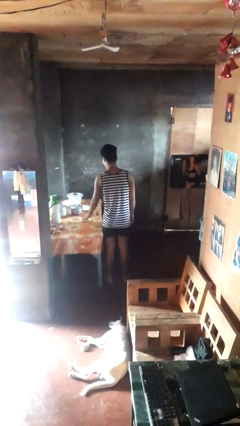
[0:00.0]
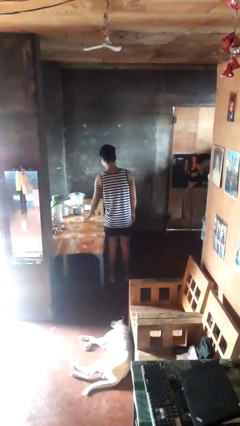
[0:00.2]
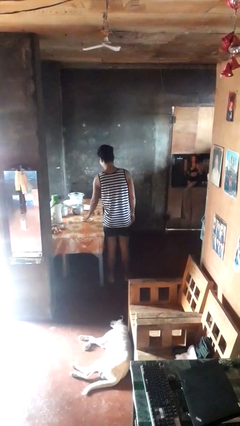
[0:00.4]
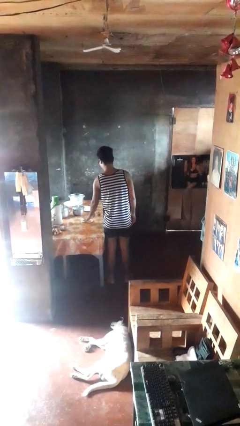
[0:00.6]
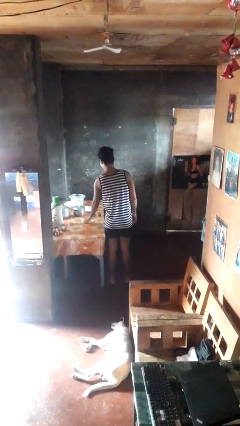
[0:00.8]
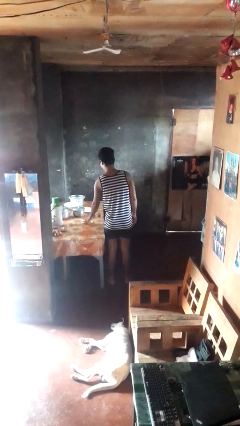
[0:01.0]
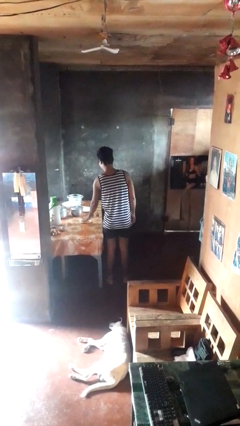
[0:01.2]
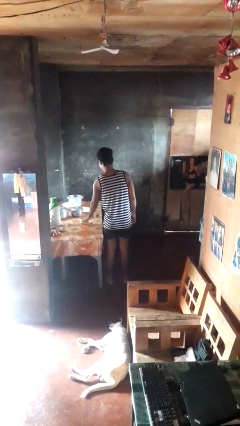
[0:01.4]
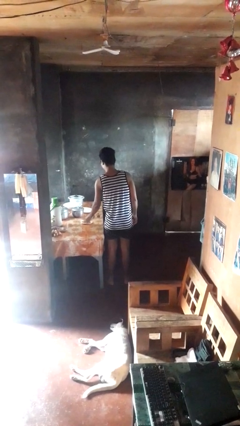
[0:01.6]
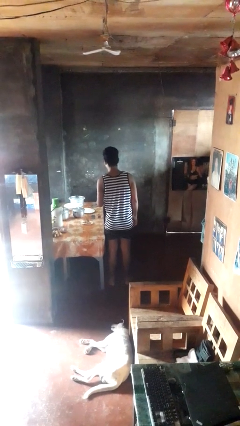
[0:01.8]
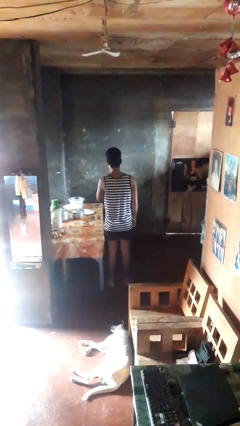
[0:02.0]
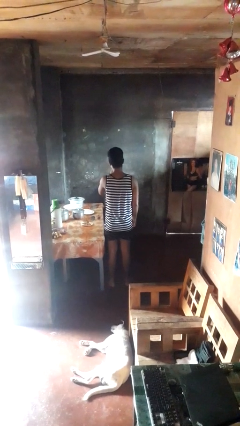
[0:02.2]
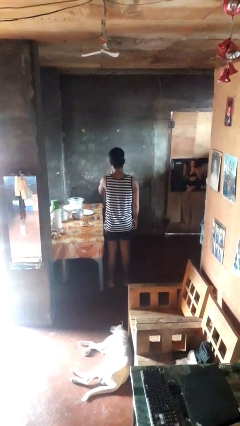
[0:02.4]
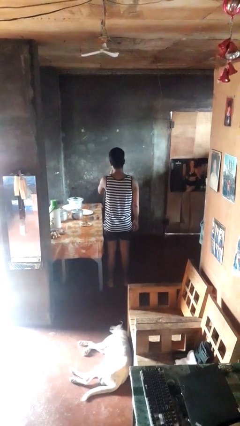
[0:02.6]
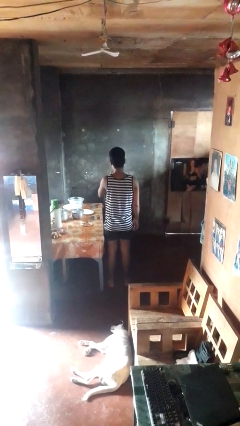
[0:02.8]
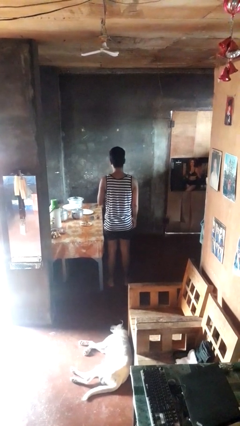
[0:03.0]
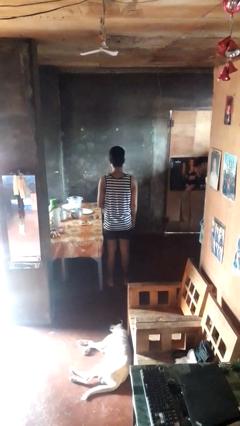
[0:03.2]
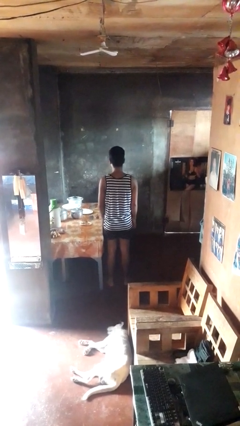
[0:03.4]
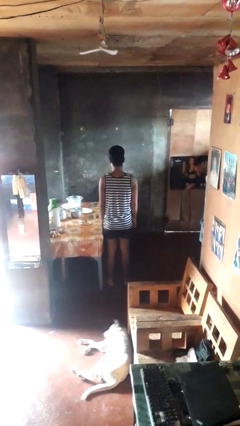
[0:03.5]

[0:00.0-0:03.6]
person eats with hands

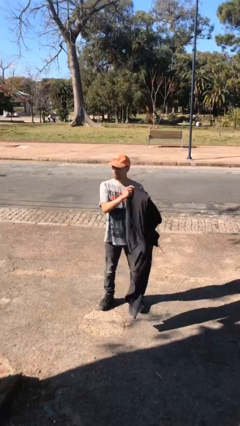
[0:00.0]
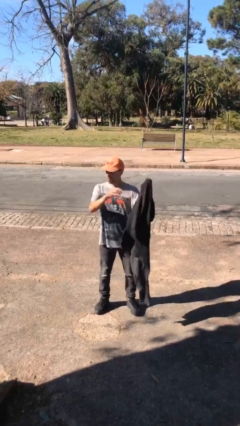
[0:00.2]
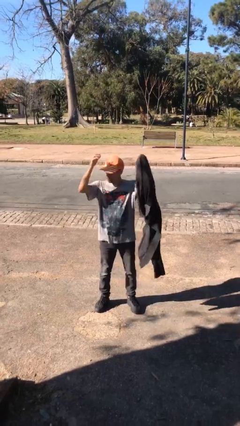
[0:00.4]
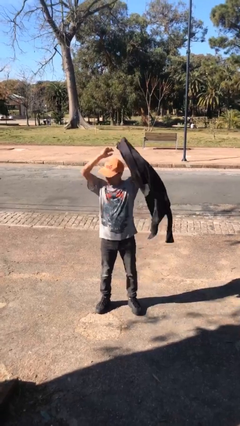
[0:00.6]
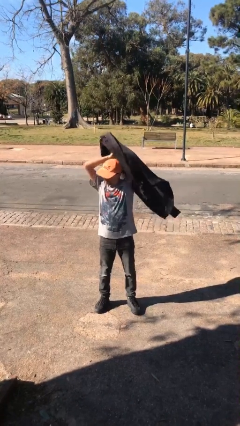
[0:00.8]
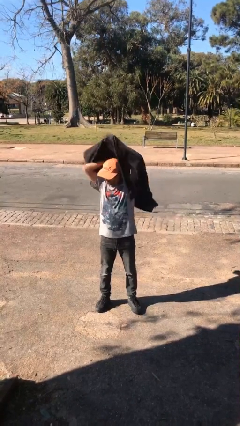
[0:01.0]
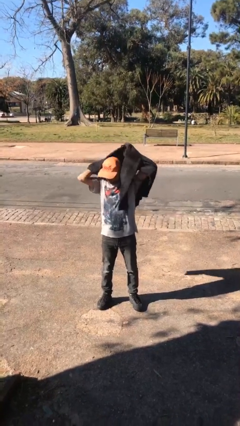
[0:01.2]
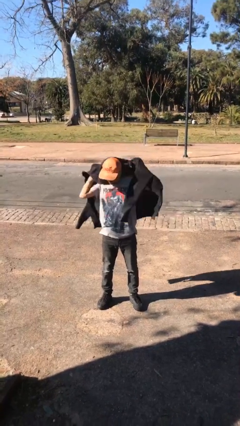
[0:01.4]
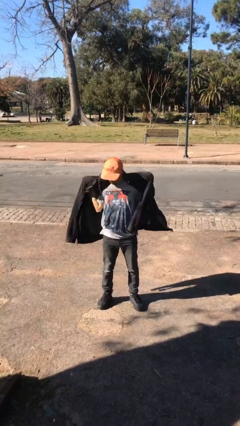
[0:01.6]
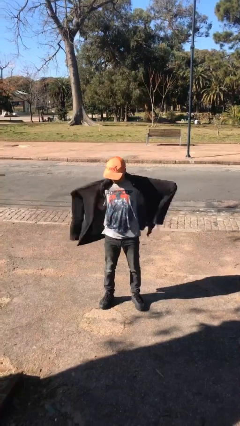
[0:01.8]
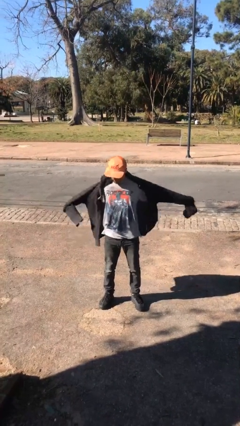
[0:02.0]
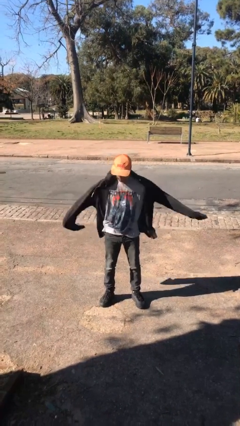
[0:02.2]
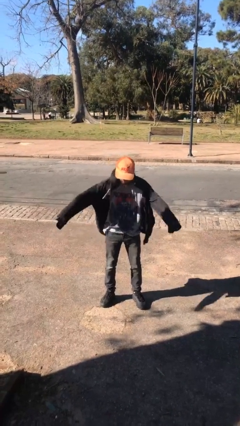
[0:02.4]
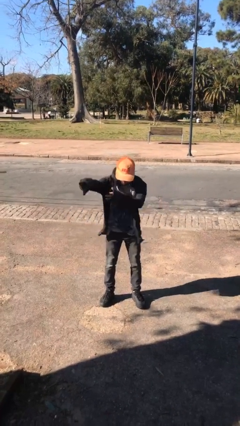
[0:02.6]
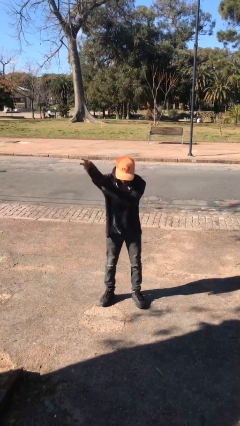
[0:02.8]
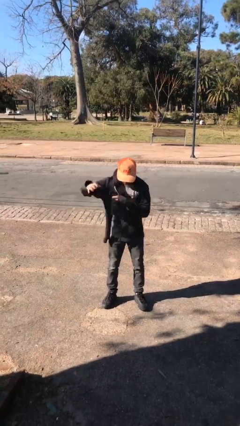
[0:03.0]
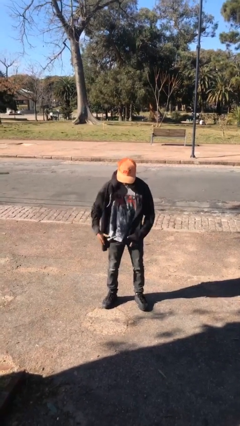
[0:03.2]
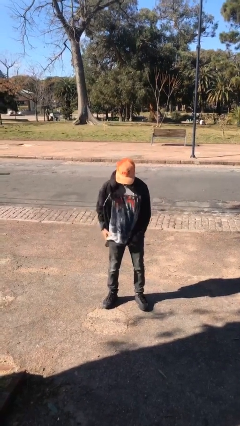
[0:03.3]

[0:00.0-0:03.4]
person puts on jacket

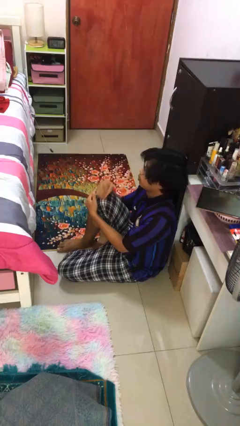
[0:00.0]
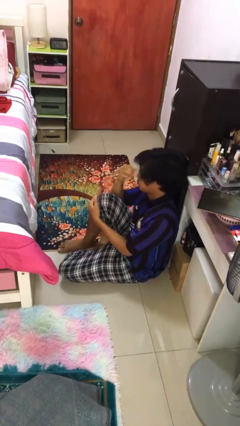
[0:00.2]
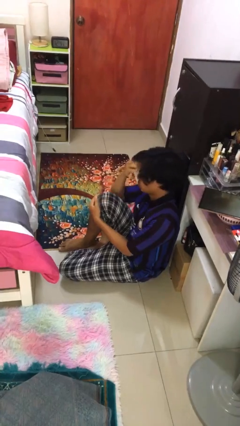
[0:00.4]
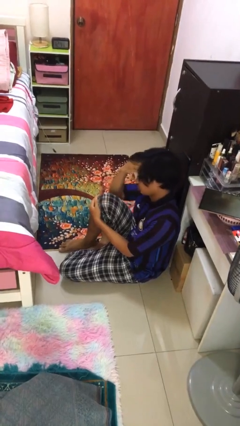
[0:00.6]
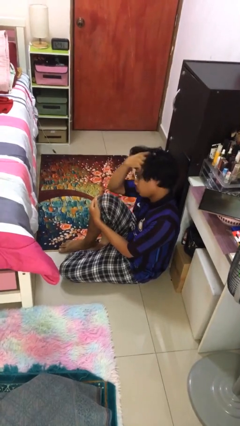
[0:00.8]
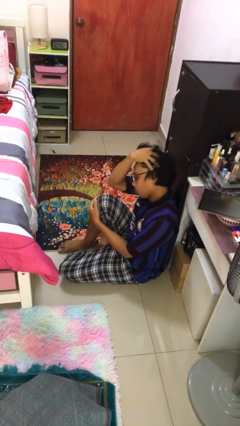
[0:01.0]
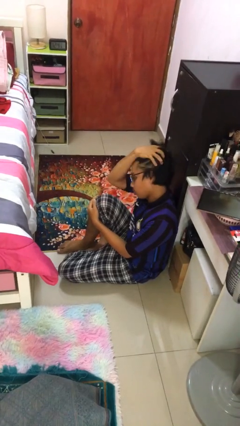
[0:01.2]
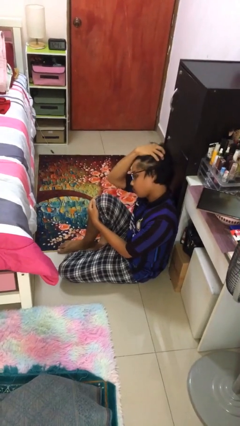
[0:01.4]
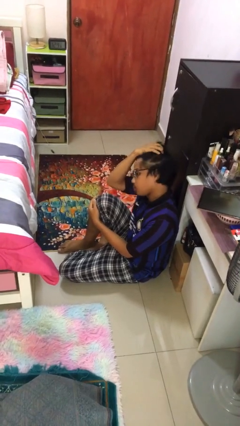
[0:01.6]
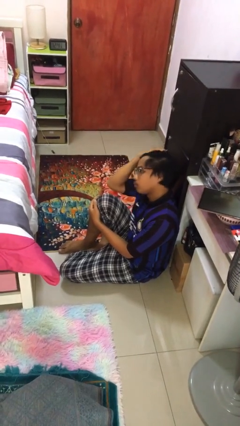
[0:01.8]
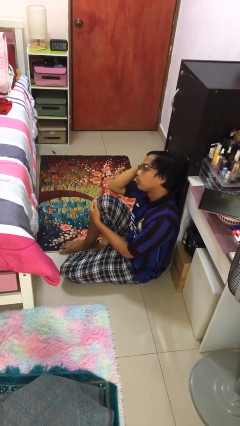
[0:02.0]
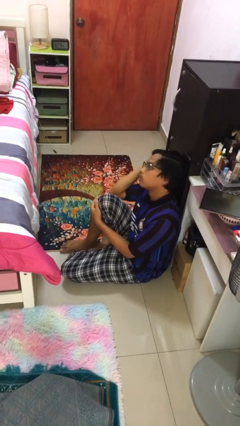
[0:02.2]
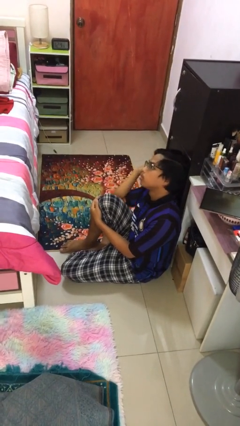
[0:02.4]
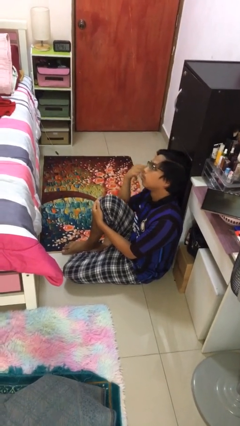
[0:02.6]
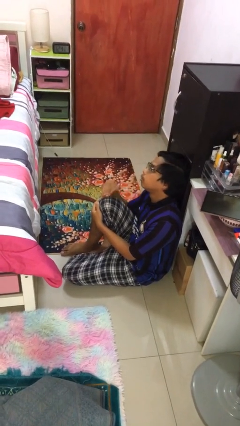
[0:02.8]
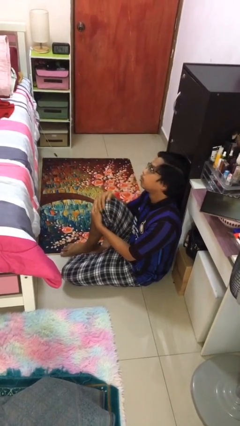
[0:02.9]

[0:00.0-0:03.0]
person strokes hair

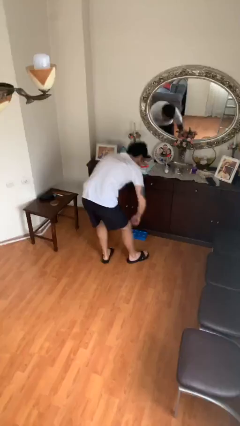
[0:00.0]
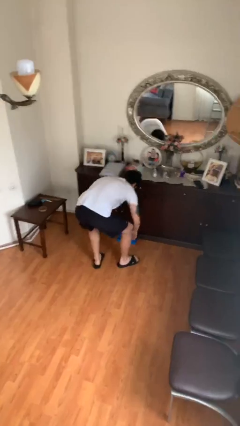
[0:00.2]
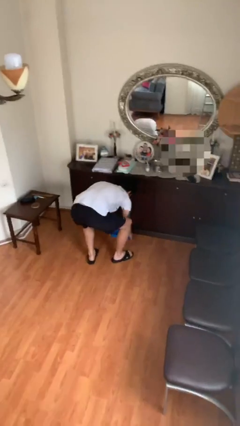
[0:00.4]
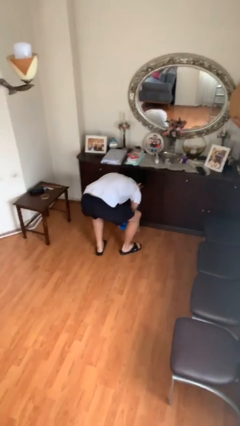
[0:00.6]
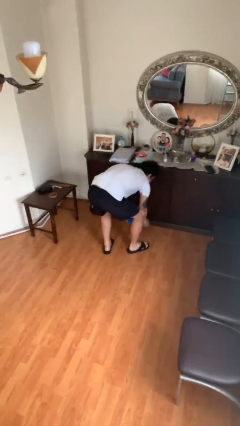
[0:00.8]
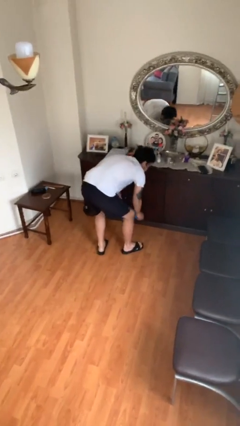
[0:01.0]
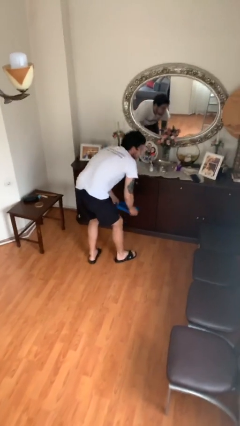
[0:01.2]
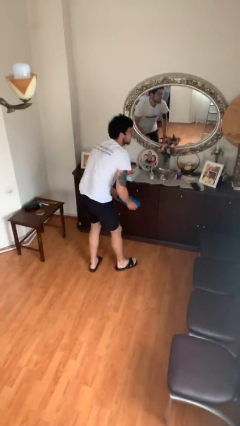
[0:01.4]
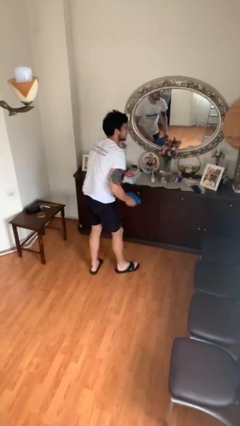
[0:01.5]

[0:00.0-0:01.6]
person picks up object from floor

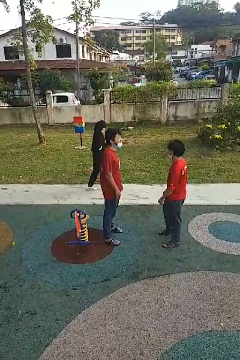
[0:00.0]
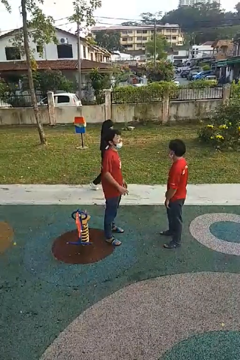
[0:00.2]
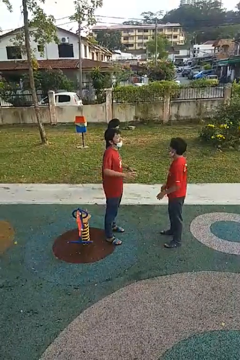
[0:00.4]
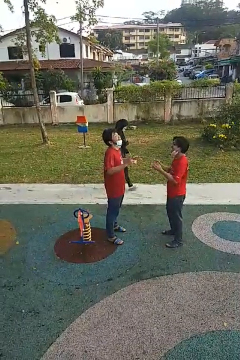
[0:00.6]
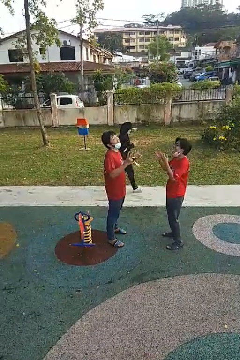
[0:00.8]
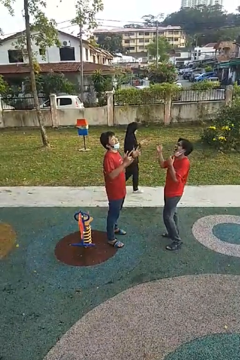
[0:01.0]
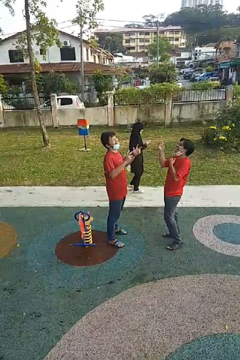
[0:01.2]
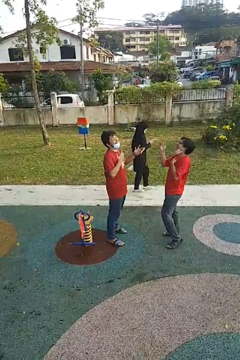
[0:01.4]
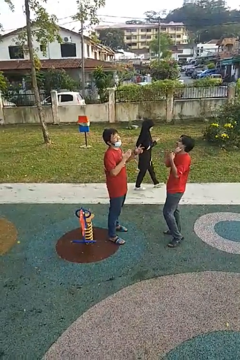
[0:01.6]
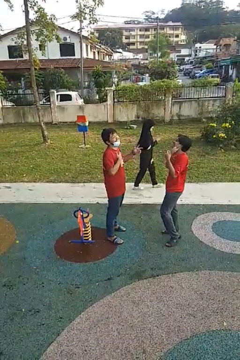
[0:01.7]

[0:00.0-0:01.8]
person laughs with person

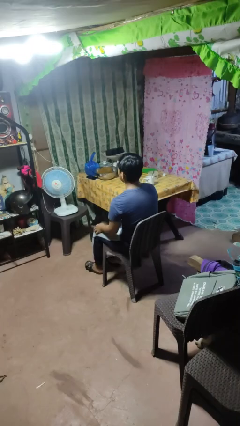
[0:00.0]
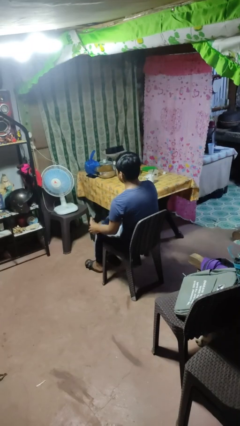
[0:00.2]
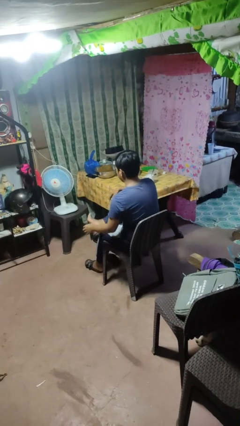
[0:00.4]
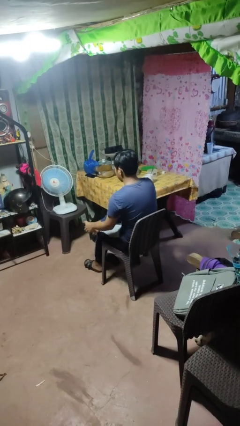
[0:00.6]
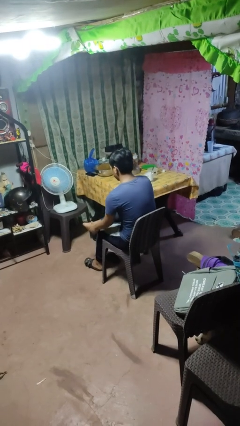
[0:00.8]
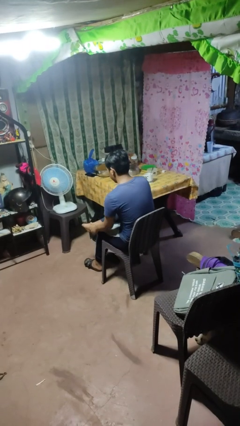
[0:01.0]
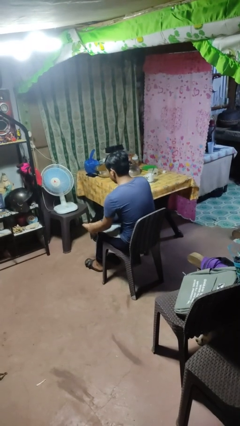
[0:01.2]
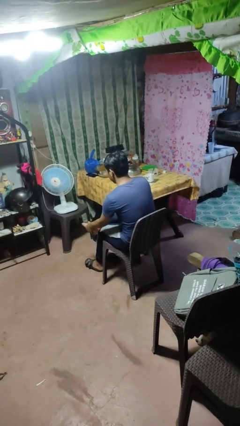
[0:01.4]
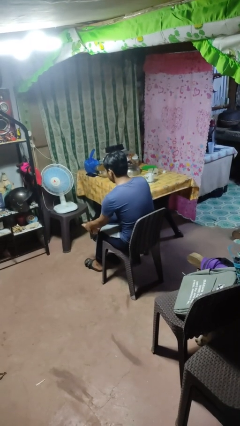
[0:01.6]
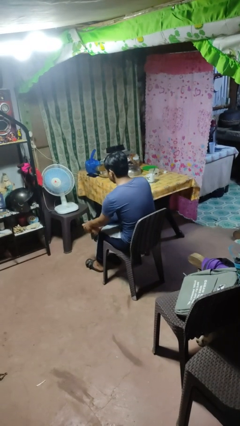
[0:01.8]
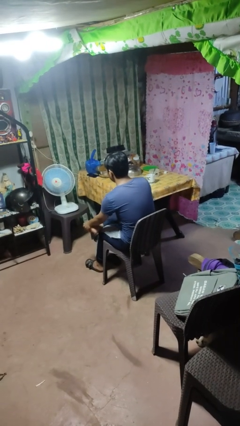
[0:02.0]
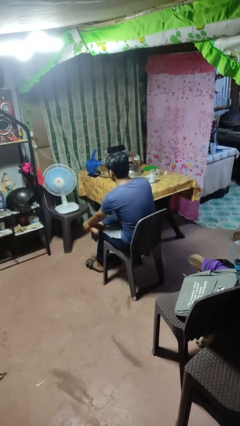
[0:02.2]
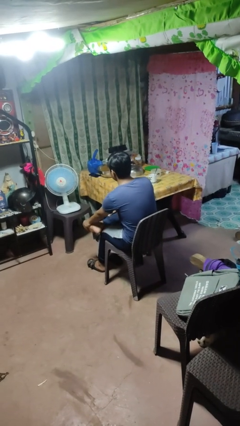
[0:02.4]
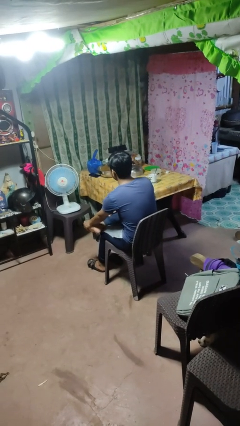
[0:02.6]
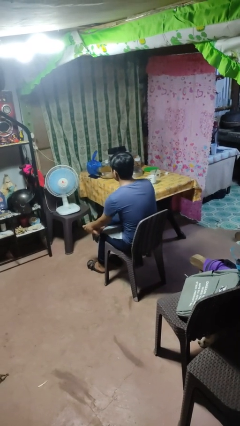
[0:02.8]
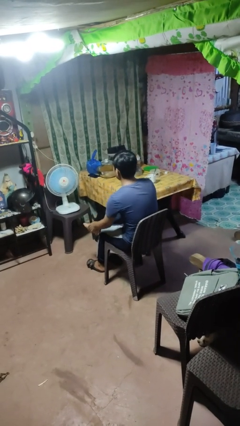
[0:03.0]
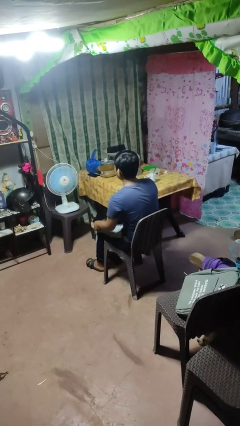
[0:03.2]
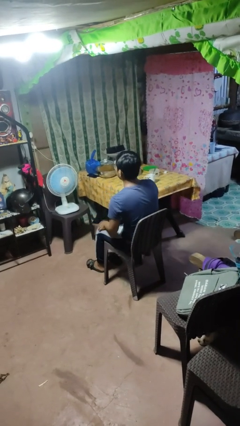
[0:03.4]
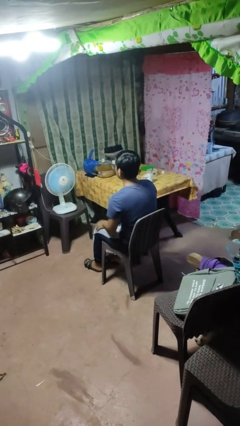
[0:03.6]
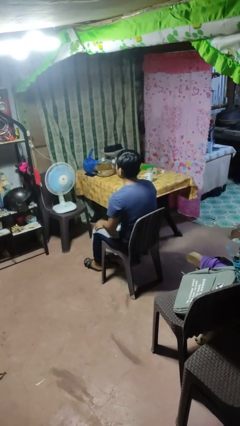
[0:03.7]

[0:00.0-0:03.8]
person rubs foot

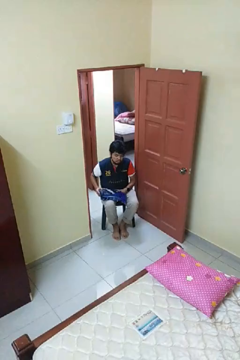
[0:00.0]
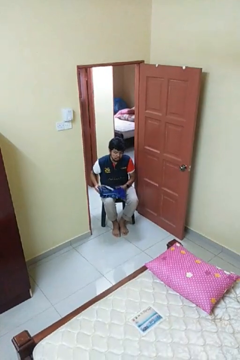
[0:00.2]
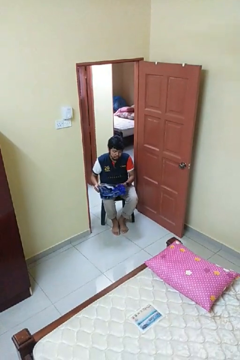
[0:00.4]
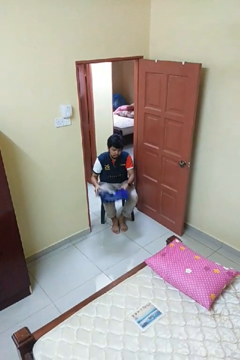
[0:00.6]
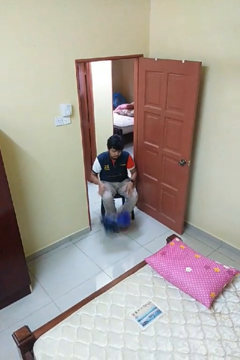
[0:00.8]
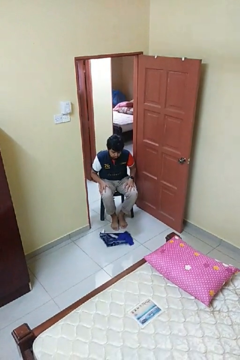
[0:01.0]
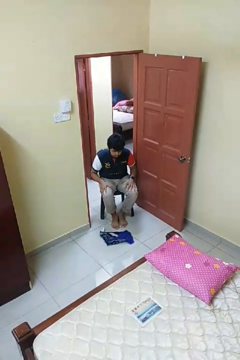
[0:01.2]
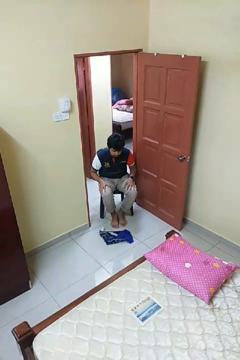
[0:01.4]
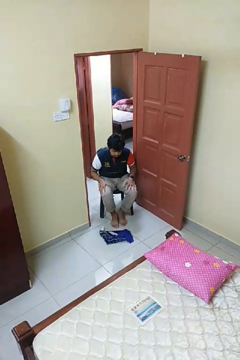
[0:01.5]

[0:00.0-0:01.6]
person drops object
